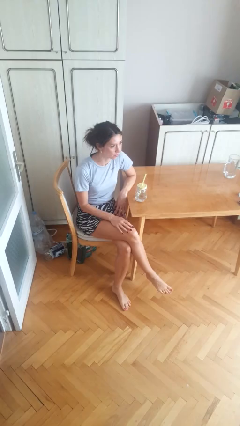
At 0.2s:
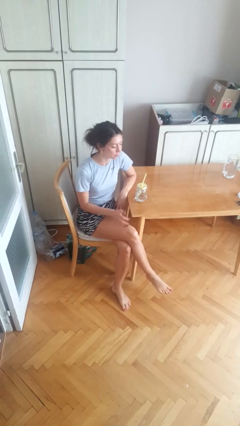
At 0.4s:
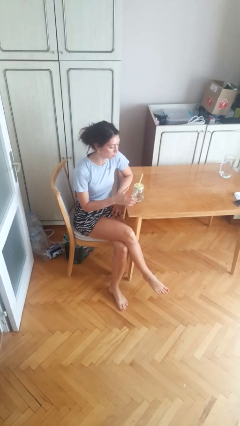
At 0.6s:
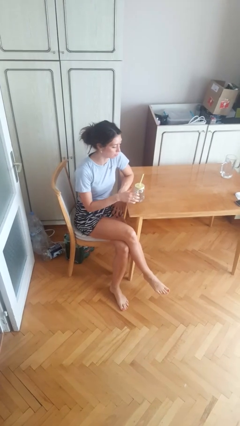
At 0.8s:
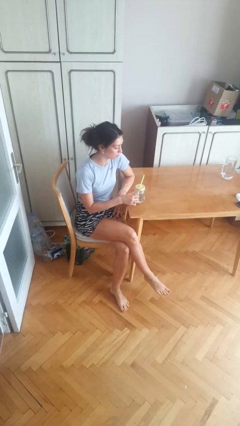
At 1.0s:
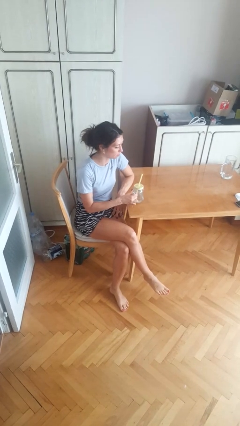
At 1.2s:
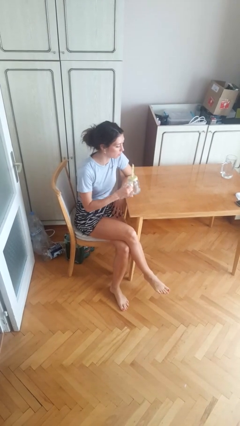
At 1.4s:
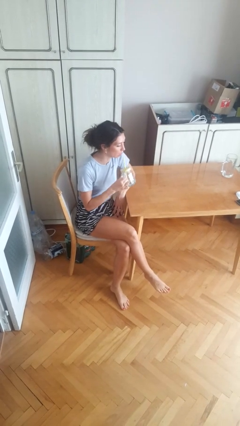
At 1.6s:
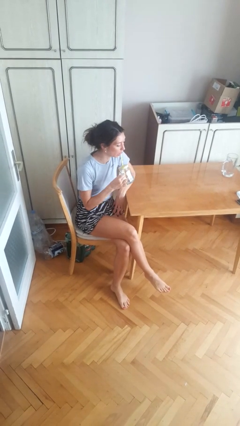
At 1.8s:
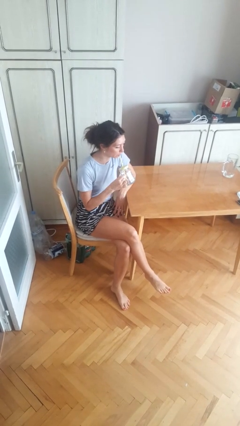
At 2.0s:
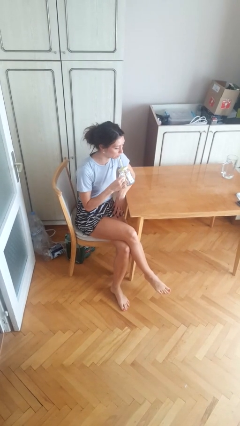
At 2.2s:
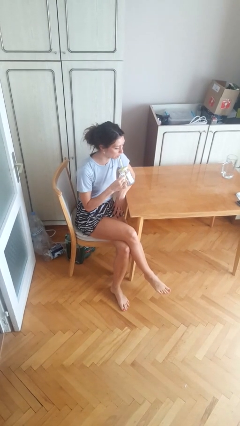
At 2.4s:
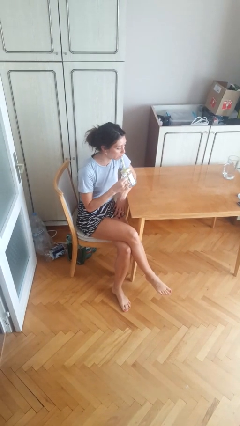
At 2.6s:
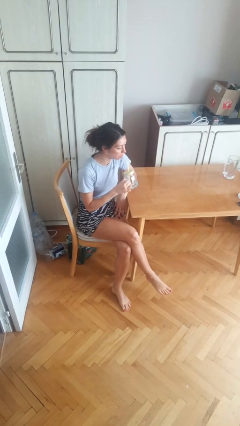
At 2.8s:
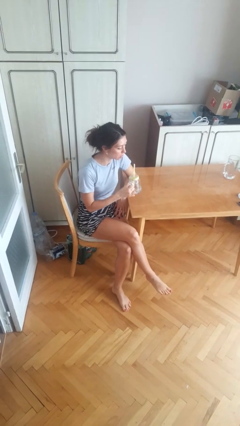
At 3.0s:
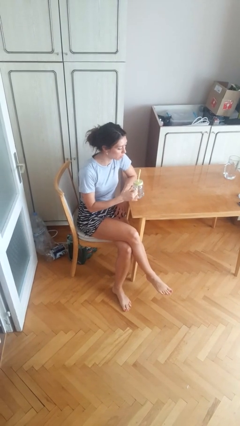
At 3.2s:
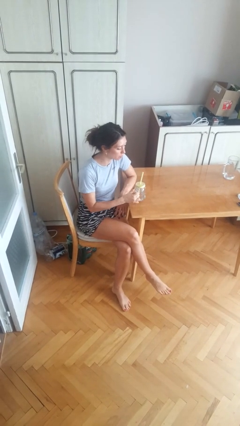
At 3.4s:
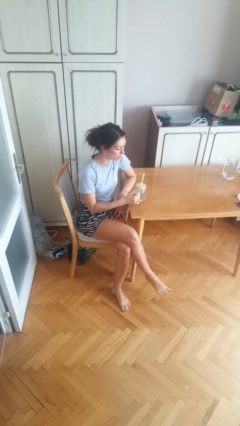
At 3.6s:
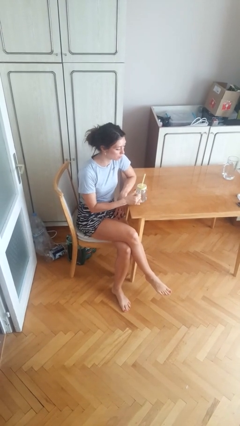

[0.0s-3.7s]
person drinks from straw

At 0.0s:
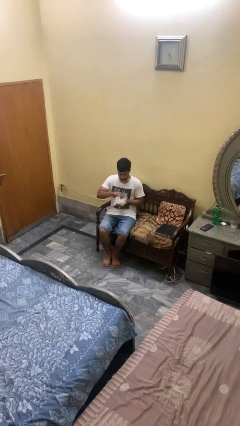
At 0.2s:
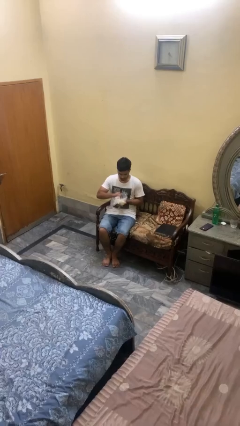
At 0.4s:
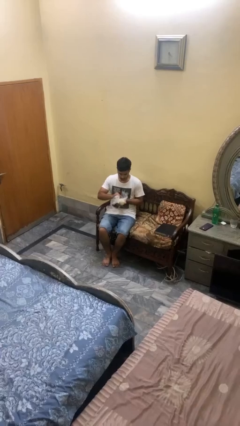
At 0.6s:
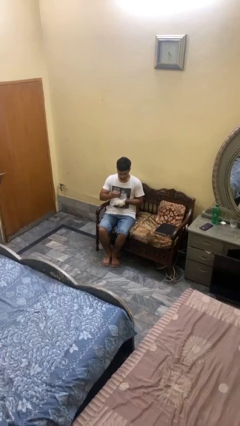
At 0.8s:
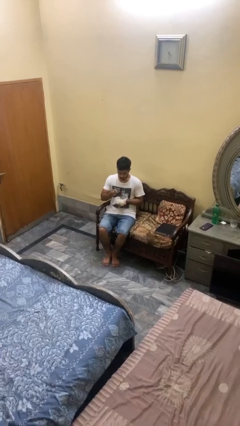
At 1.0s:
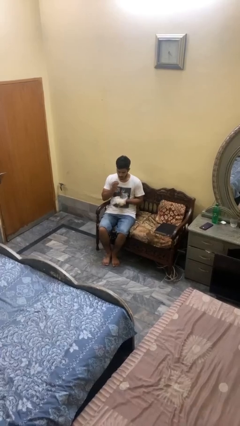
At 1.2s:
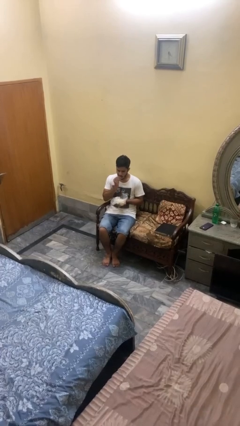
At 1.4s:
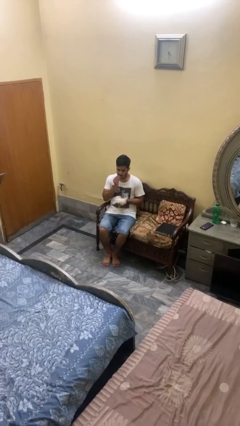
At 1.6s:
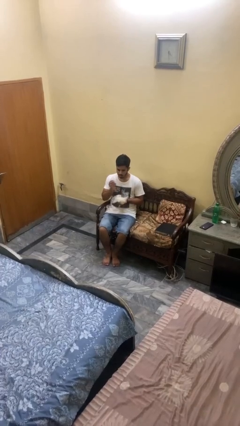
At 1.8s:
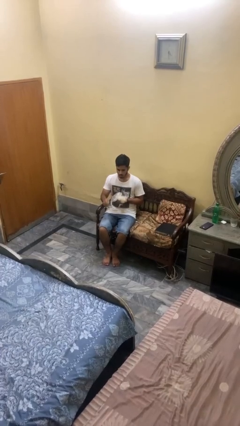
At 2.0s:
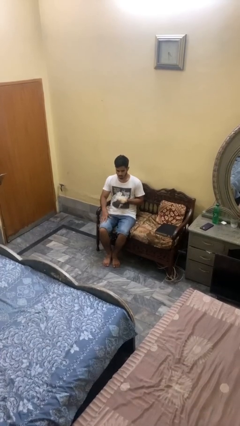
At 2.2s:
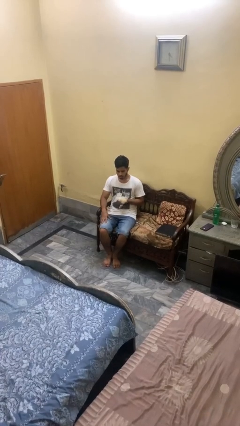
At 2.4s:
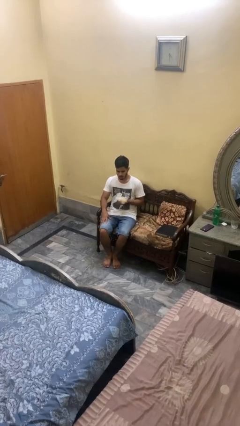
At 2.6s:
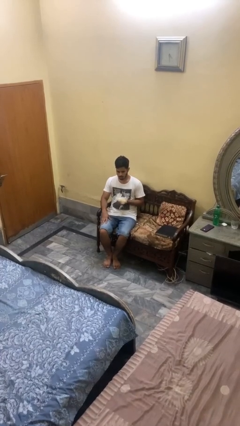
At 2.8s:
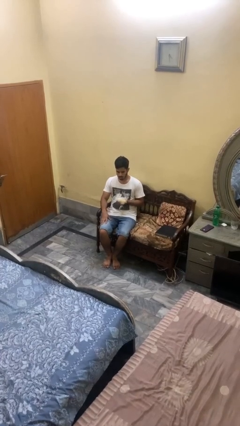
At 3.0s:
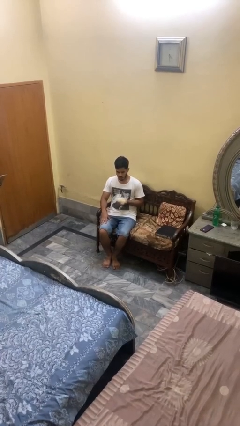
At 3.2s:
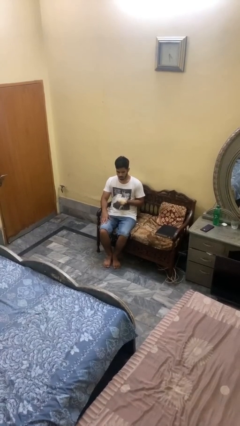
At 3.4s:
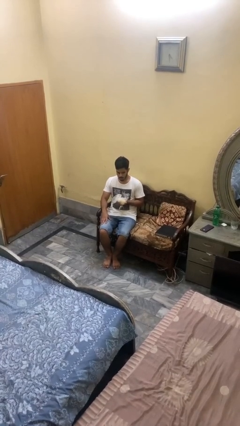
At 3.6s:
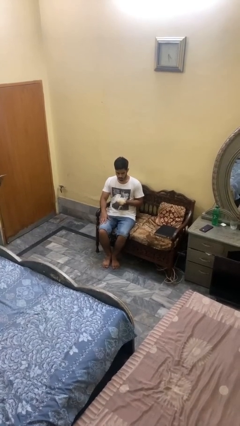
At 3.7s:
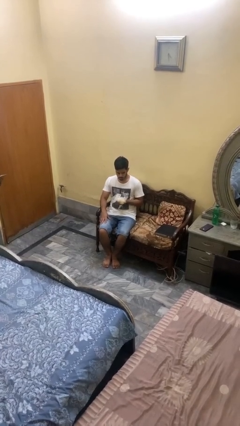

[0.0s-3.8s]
person eats snack from bag

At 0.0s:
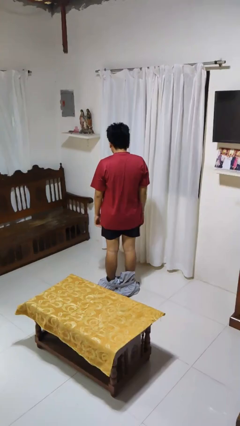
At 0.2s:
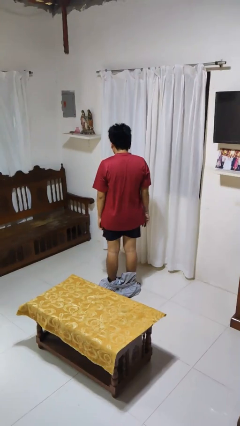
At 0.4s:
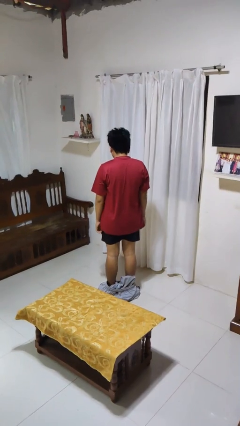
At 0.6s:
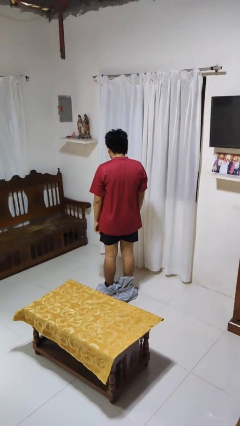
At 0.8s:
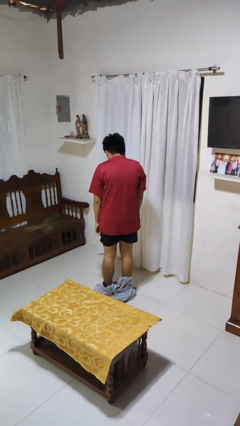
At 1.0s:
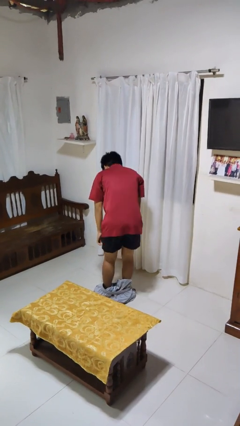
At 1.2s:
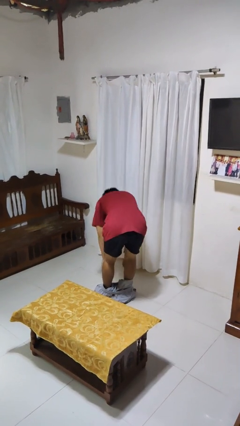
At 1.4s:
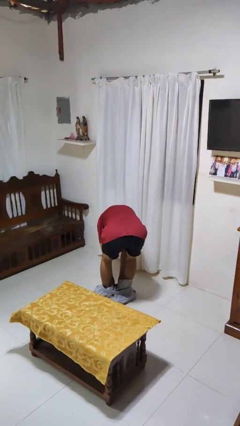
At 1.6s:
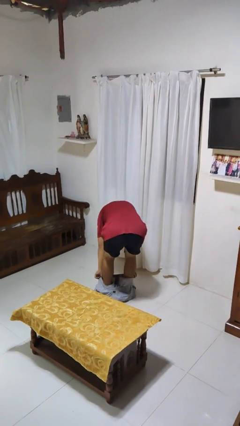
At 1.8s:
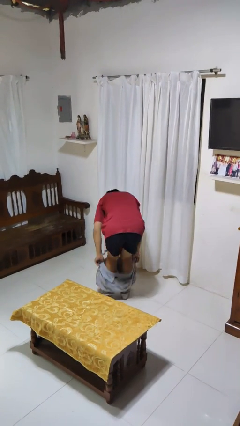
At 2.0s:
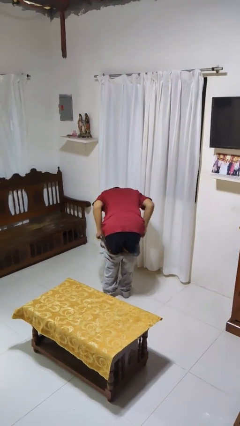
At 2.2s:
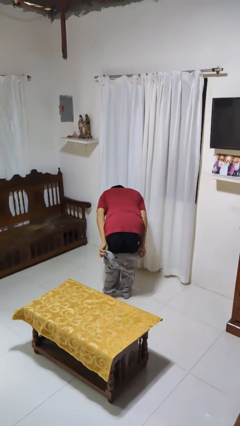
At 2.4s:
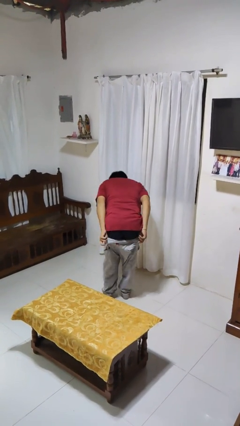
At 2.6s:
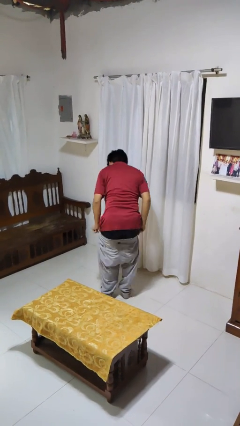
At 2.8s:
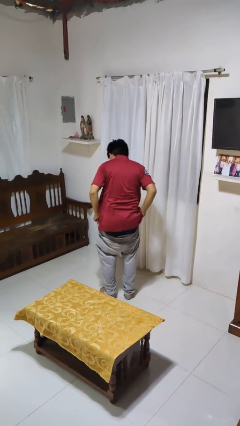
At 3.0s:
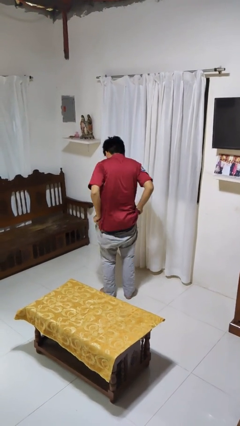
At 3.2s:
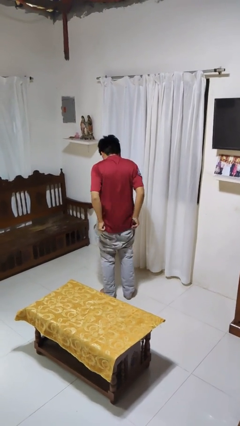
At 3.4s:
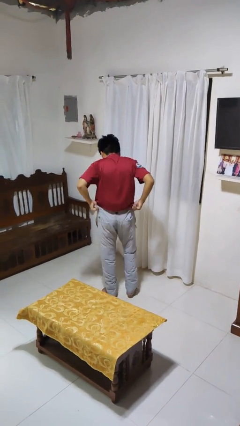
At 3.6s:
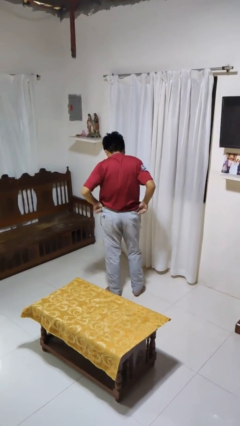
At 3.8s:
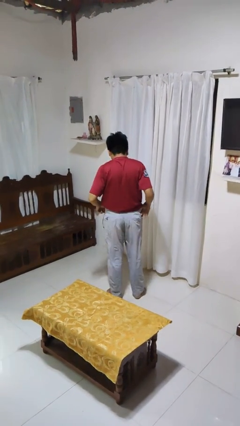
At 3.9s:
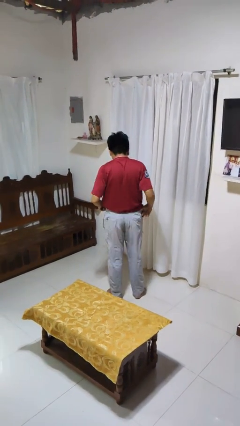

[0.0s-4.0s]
person puts on pants

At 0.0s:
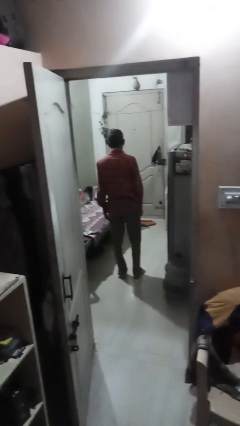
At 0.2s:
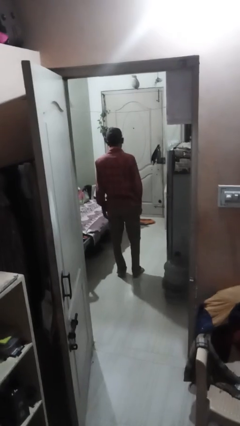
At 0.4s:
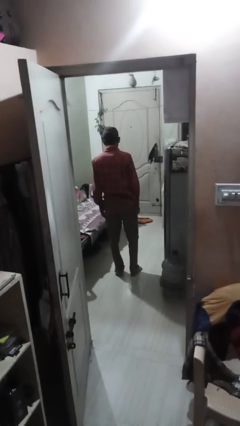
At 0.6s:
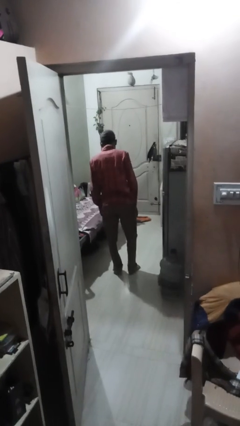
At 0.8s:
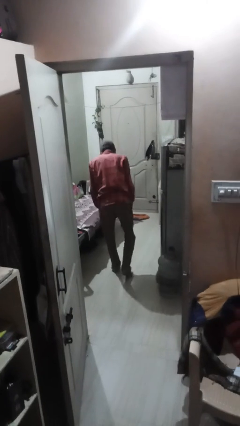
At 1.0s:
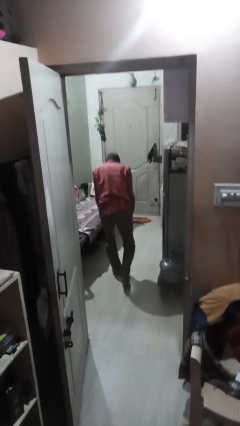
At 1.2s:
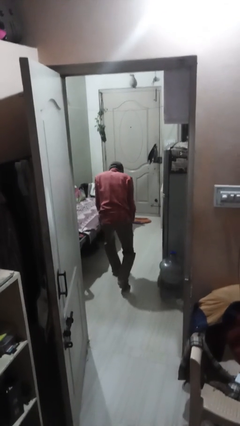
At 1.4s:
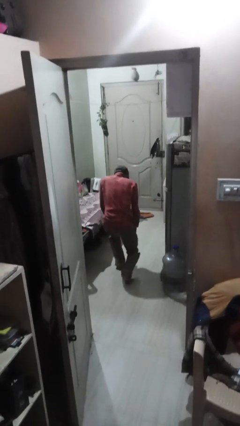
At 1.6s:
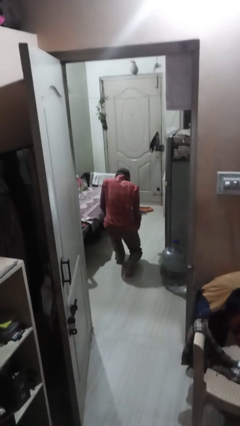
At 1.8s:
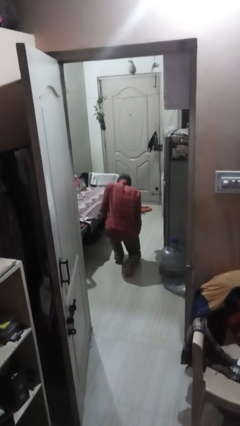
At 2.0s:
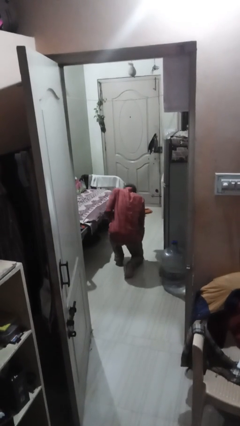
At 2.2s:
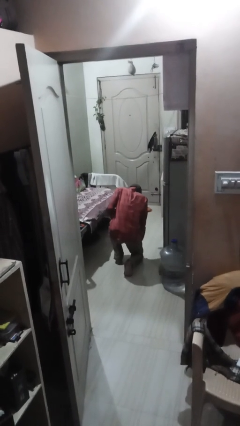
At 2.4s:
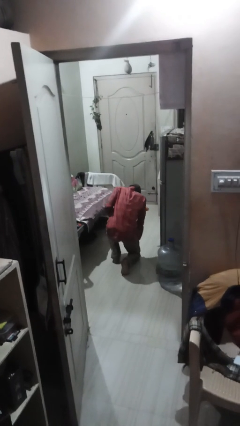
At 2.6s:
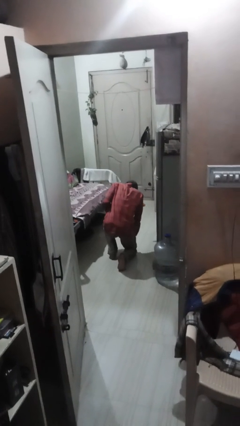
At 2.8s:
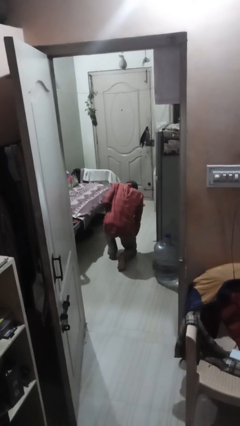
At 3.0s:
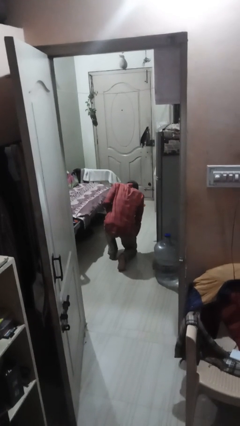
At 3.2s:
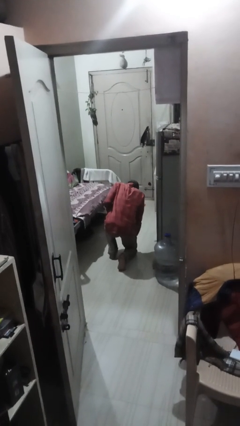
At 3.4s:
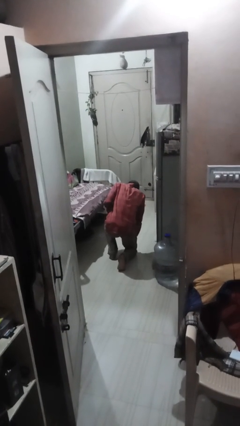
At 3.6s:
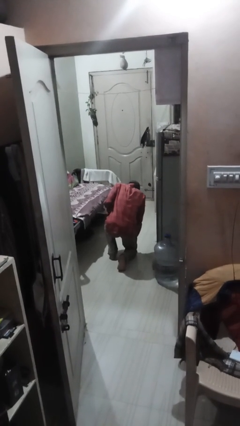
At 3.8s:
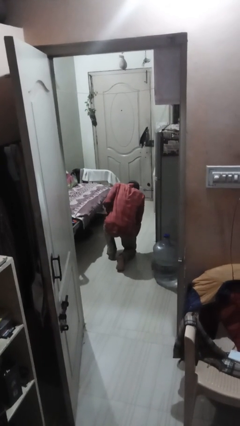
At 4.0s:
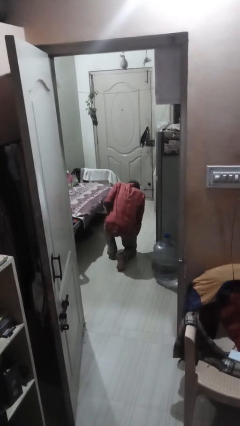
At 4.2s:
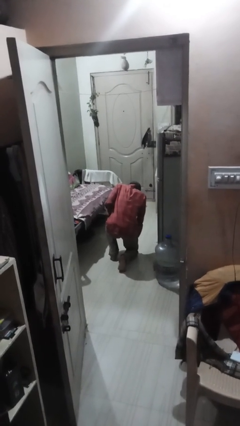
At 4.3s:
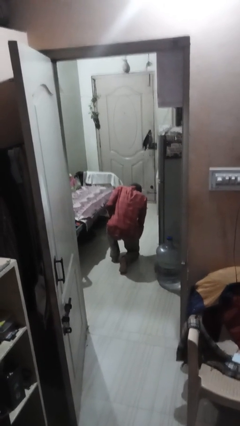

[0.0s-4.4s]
person kneels

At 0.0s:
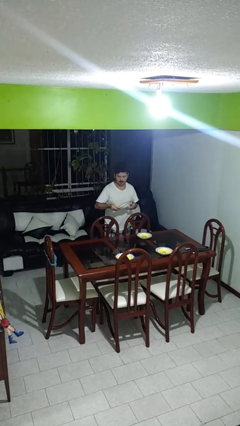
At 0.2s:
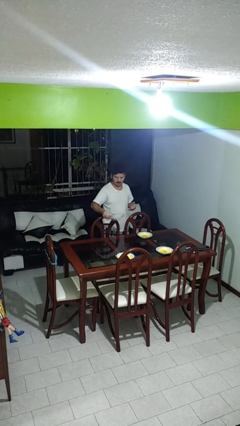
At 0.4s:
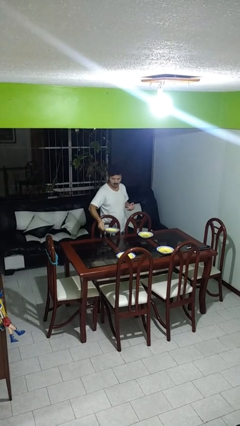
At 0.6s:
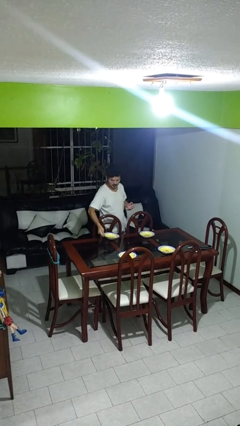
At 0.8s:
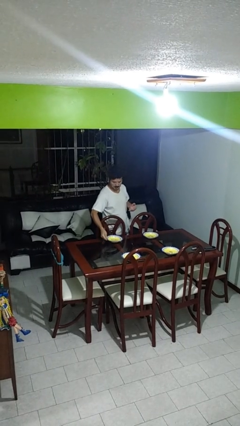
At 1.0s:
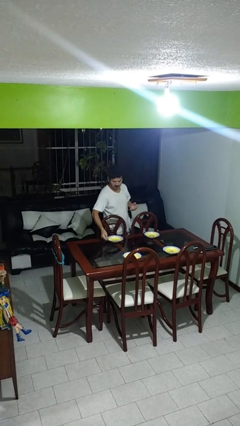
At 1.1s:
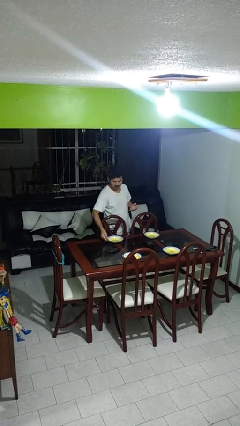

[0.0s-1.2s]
person sets table

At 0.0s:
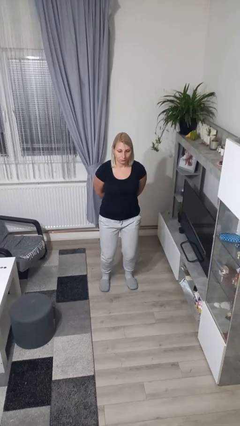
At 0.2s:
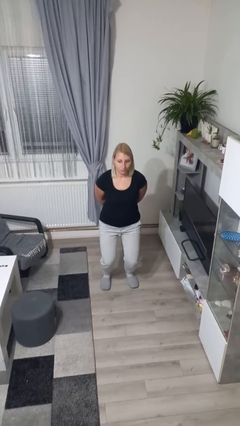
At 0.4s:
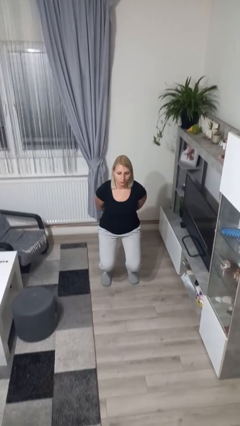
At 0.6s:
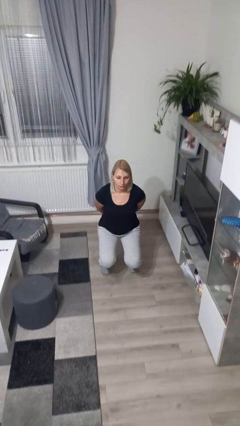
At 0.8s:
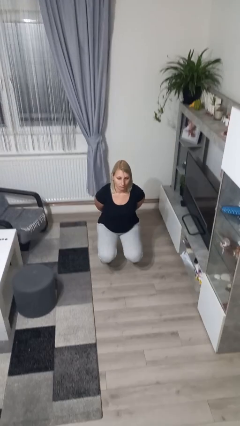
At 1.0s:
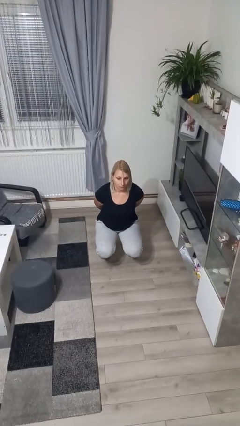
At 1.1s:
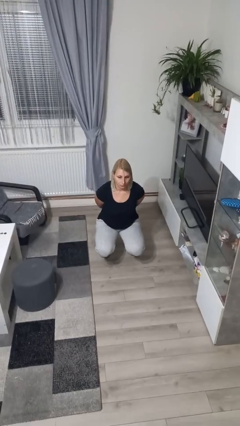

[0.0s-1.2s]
person squats
